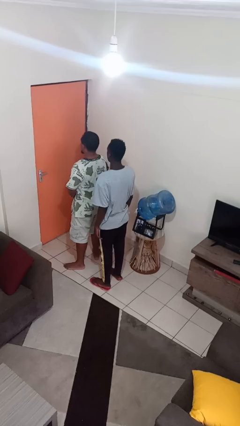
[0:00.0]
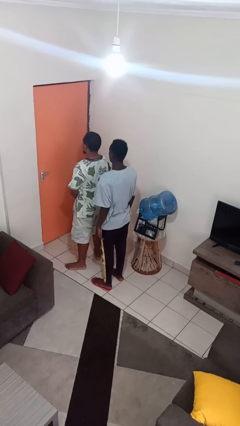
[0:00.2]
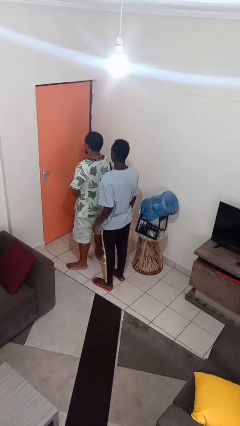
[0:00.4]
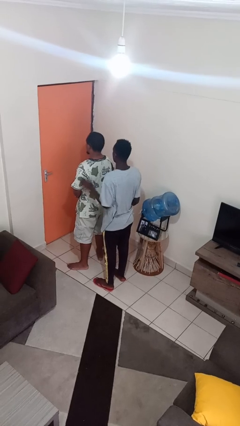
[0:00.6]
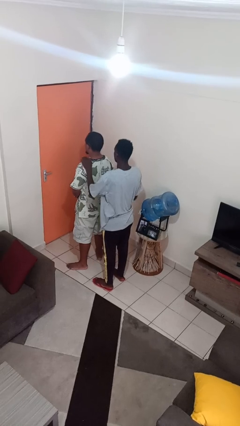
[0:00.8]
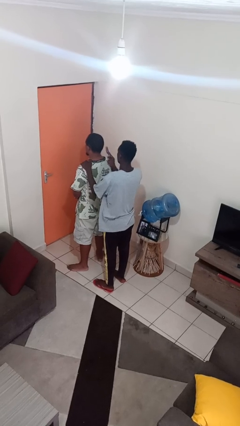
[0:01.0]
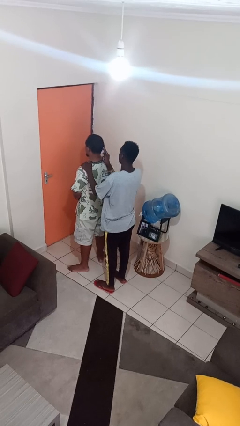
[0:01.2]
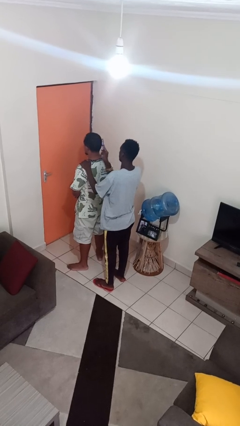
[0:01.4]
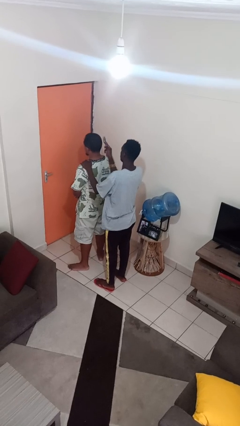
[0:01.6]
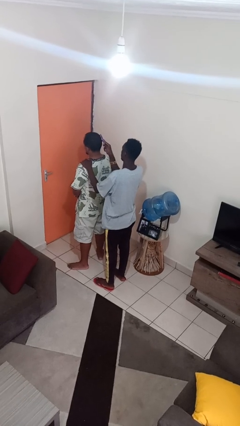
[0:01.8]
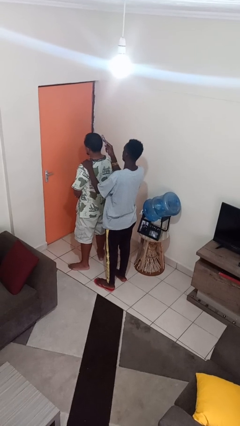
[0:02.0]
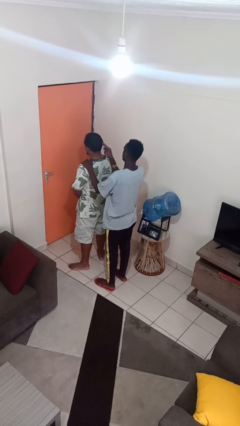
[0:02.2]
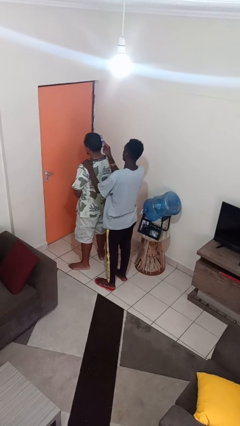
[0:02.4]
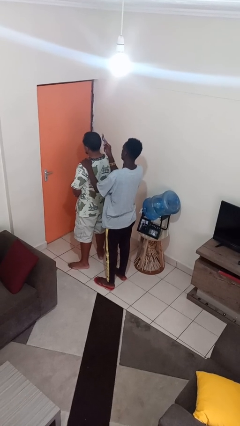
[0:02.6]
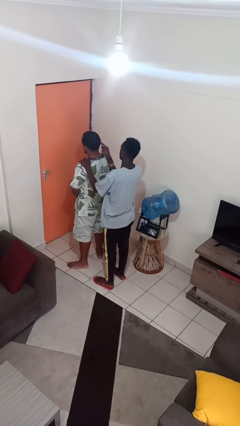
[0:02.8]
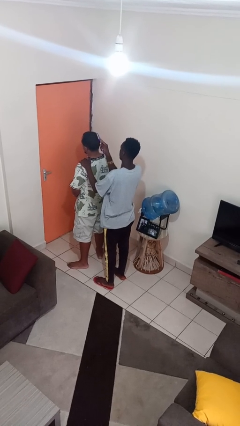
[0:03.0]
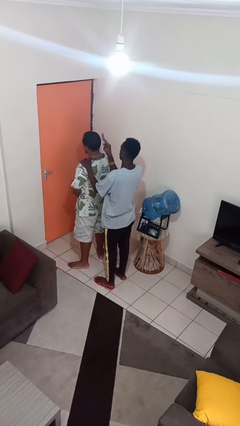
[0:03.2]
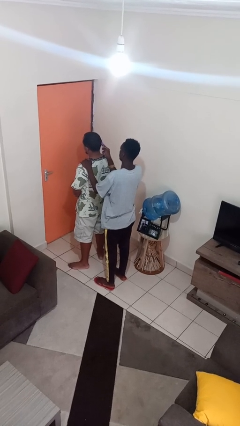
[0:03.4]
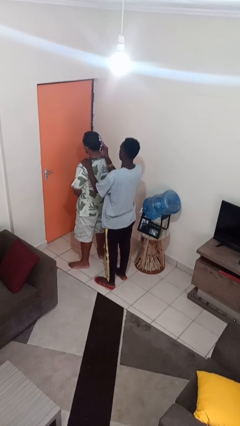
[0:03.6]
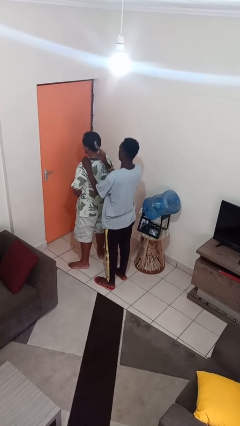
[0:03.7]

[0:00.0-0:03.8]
person brushes hair of person

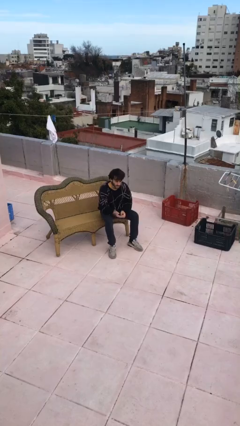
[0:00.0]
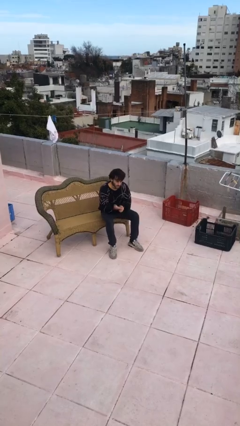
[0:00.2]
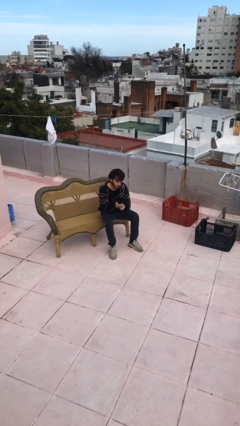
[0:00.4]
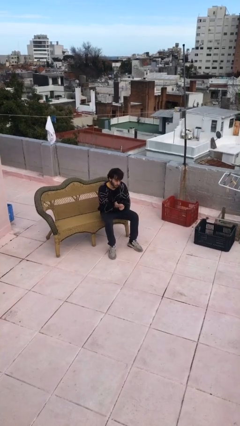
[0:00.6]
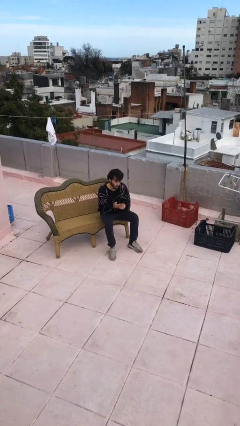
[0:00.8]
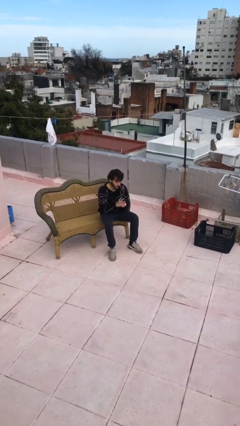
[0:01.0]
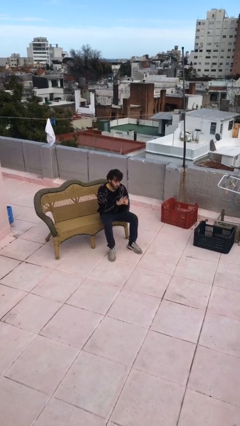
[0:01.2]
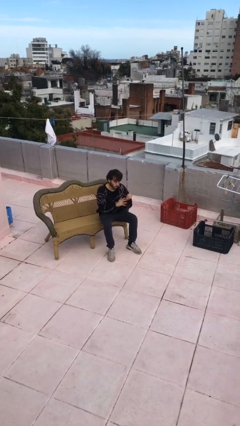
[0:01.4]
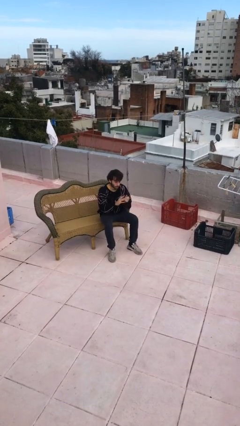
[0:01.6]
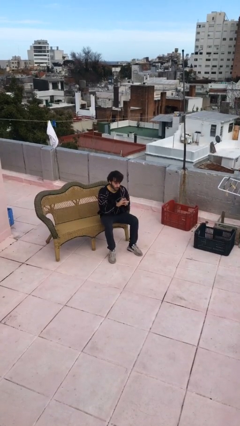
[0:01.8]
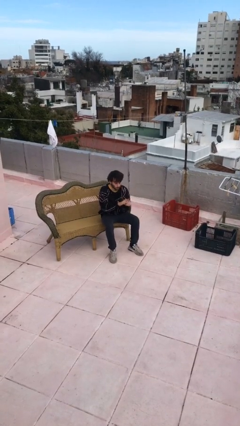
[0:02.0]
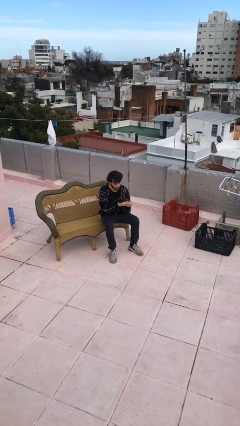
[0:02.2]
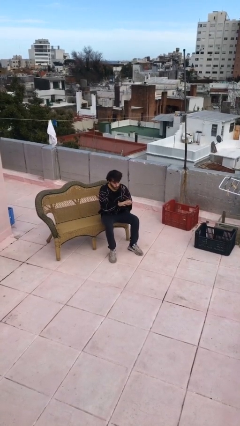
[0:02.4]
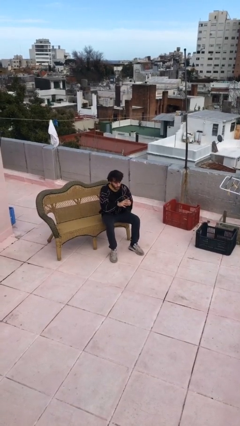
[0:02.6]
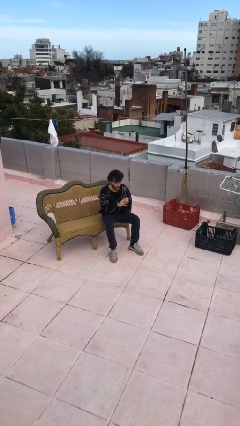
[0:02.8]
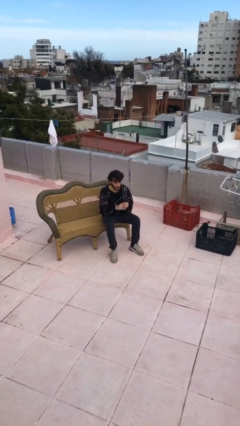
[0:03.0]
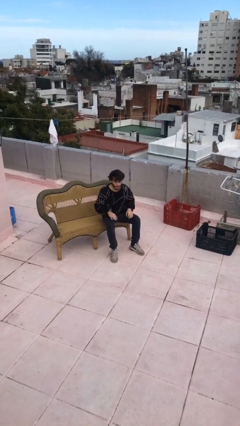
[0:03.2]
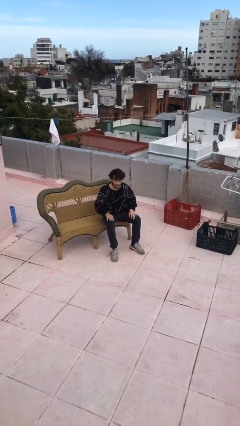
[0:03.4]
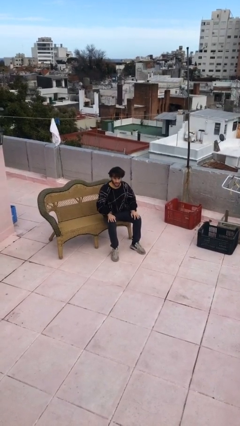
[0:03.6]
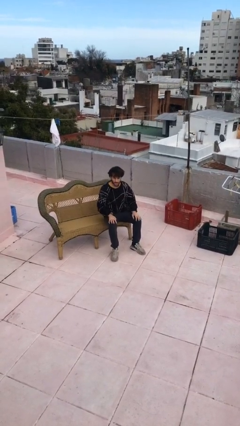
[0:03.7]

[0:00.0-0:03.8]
person cracks knuckles

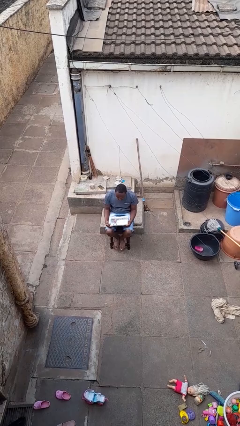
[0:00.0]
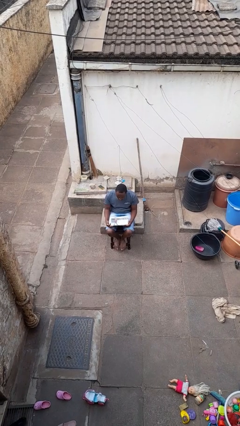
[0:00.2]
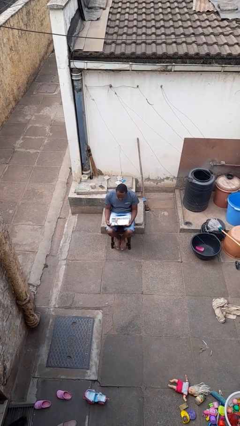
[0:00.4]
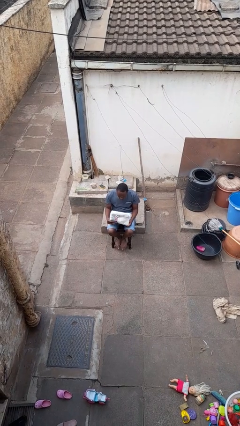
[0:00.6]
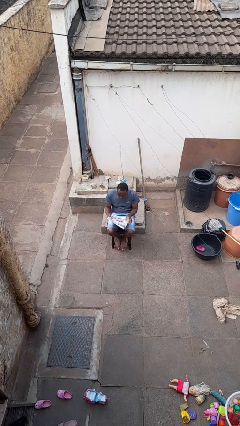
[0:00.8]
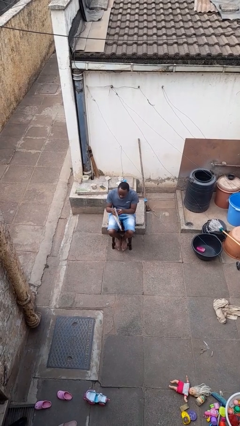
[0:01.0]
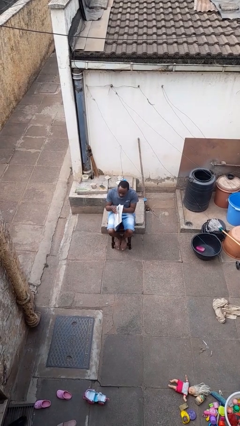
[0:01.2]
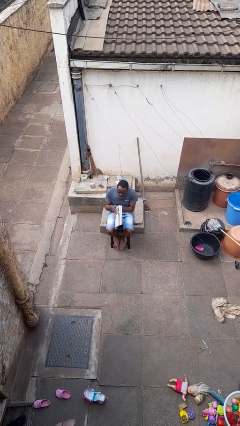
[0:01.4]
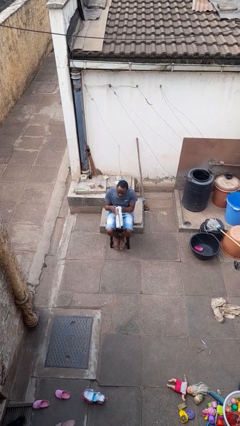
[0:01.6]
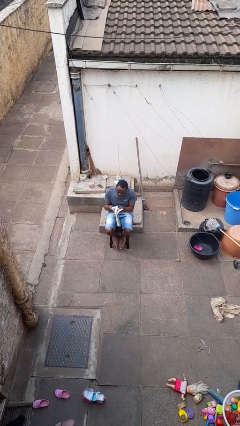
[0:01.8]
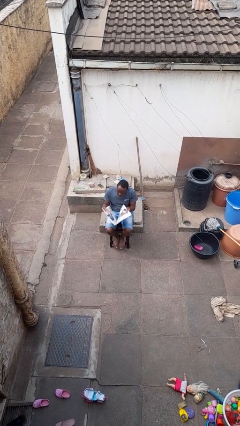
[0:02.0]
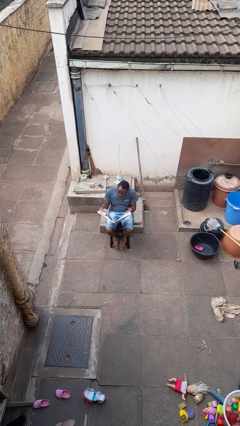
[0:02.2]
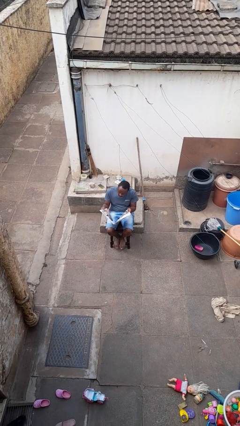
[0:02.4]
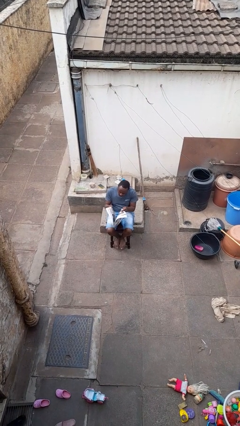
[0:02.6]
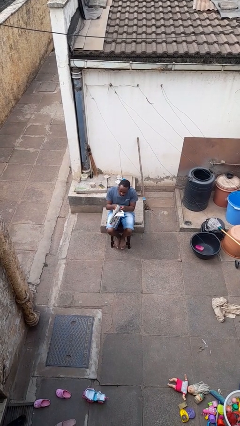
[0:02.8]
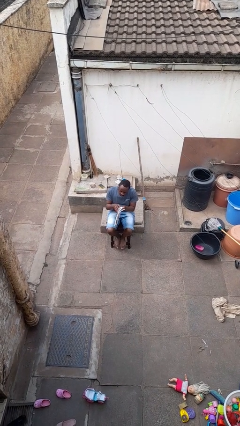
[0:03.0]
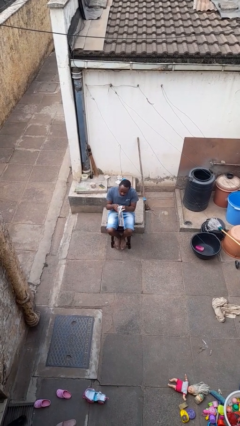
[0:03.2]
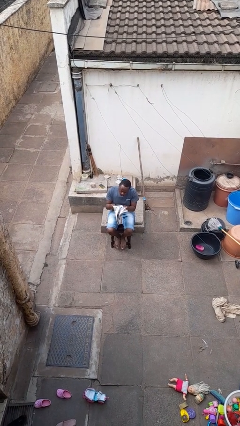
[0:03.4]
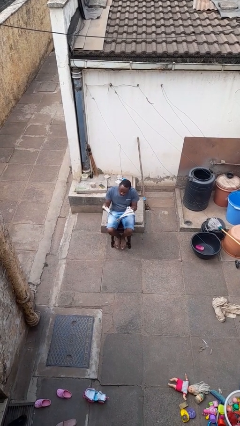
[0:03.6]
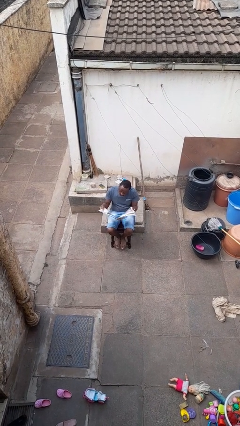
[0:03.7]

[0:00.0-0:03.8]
person reads newspaper

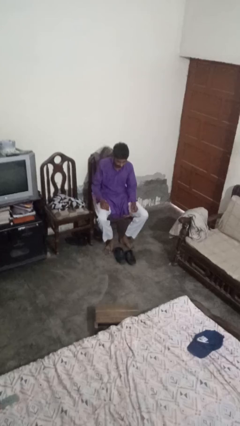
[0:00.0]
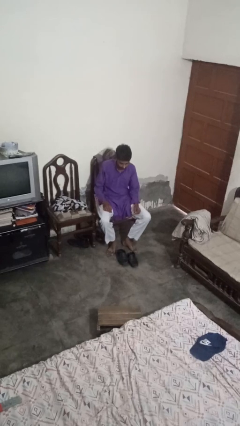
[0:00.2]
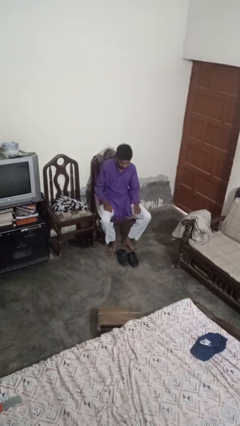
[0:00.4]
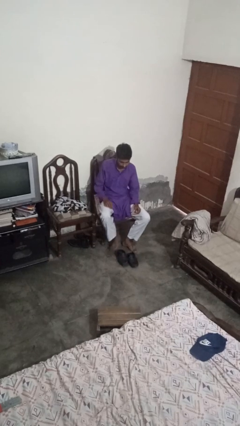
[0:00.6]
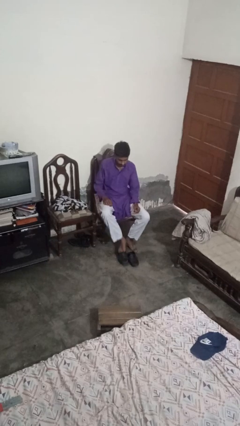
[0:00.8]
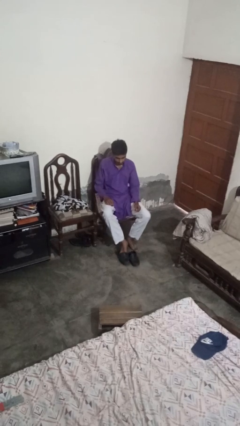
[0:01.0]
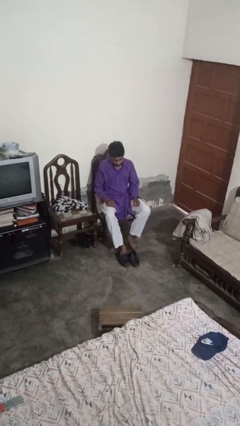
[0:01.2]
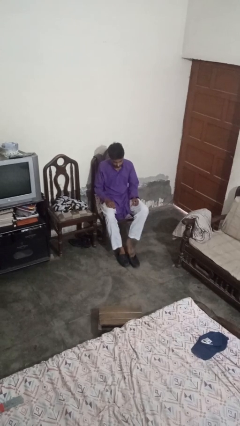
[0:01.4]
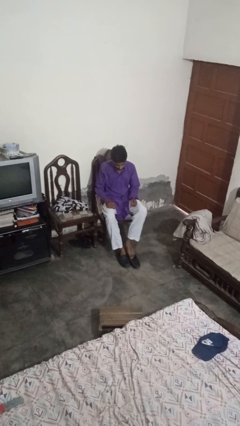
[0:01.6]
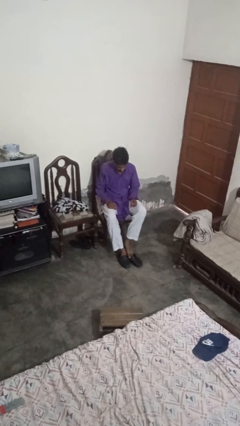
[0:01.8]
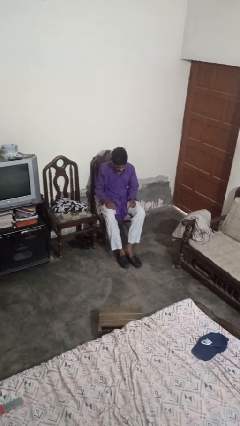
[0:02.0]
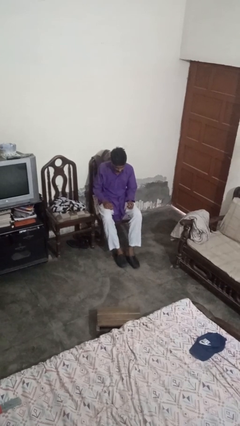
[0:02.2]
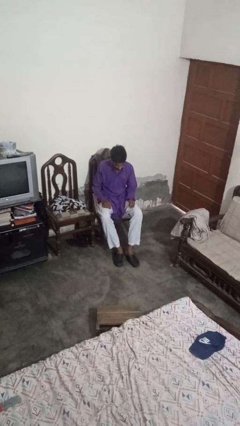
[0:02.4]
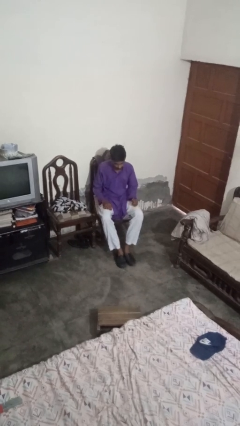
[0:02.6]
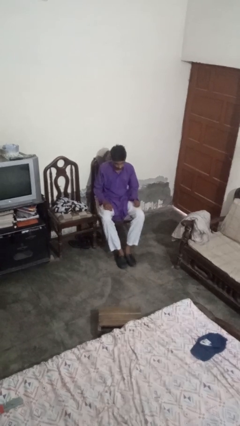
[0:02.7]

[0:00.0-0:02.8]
person puts on shoes

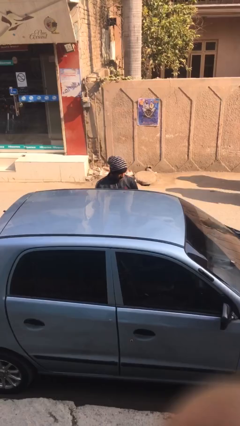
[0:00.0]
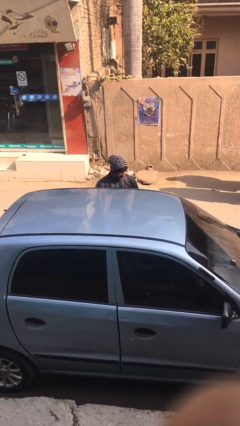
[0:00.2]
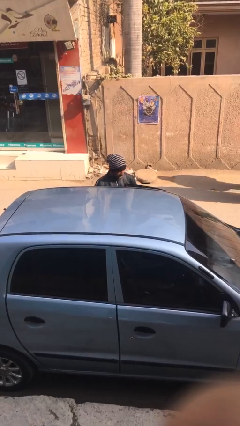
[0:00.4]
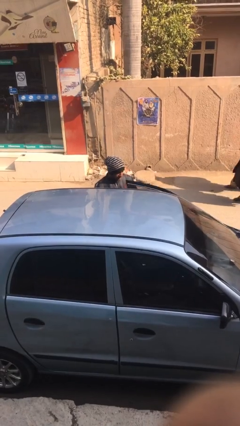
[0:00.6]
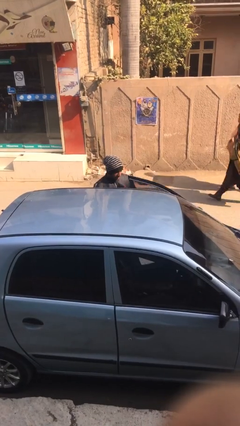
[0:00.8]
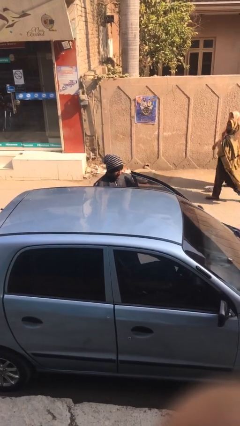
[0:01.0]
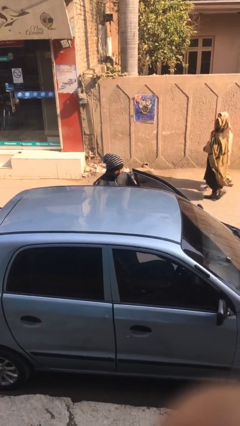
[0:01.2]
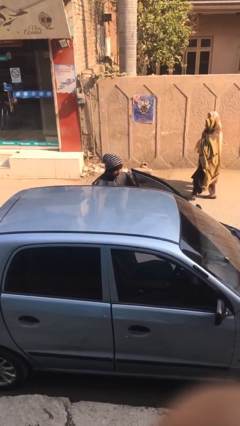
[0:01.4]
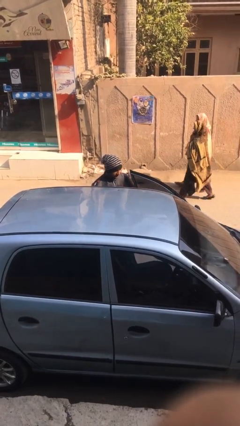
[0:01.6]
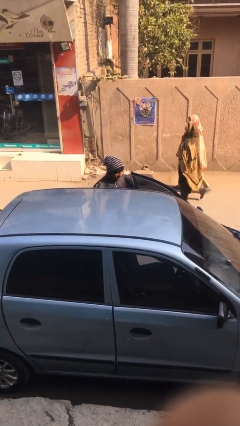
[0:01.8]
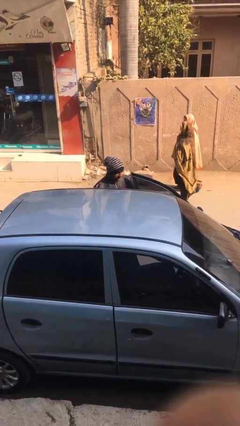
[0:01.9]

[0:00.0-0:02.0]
person opens car door

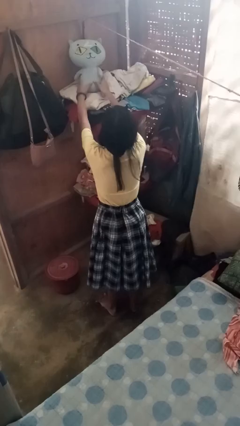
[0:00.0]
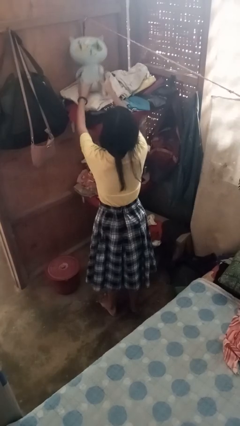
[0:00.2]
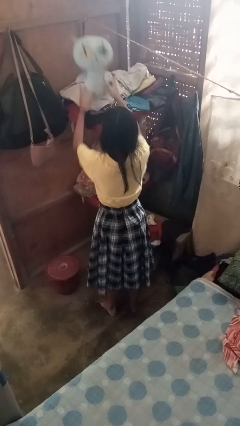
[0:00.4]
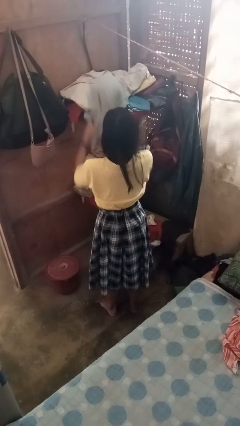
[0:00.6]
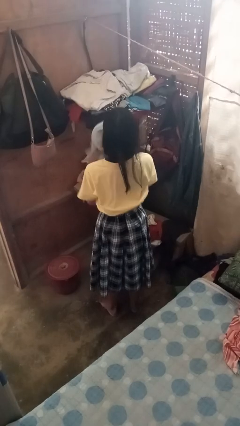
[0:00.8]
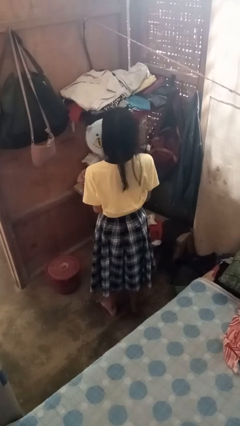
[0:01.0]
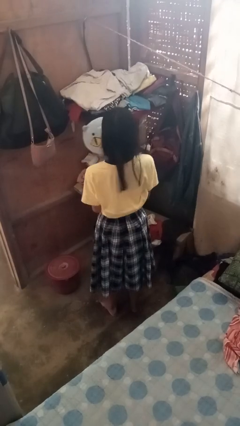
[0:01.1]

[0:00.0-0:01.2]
person picks up object from shelf
